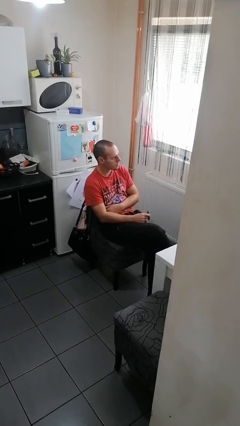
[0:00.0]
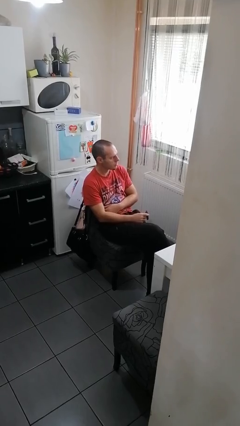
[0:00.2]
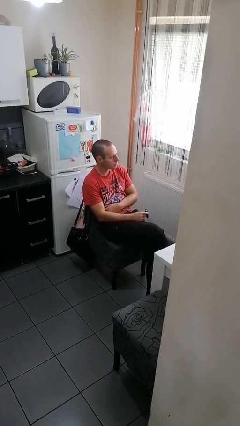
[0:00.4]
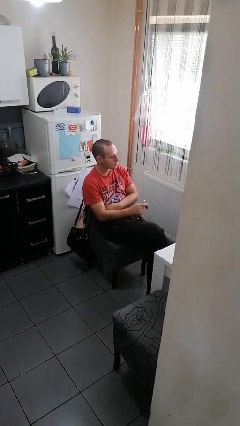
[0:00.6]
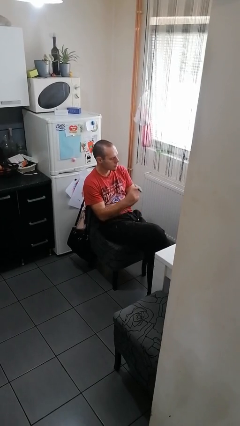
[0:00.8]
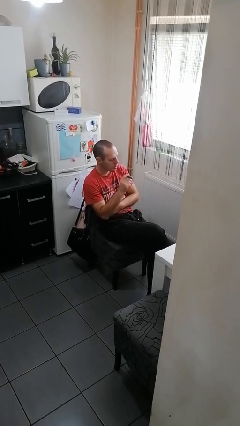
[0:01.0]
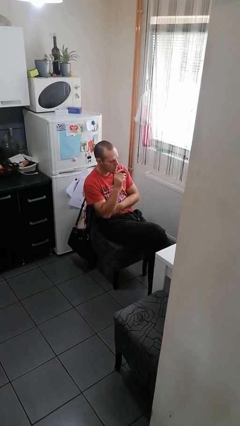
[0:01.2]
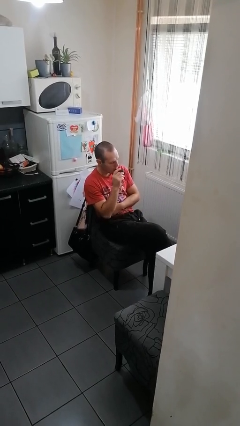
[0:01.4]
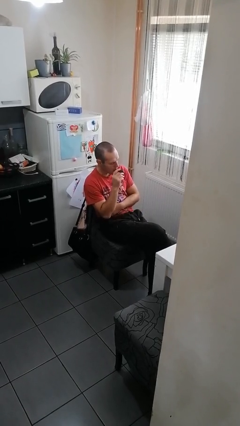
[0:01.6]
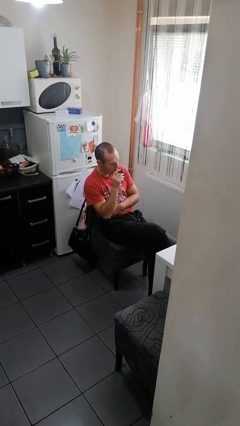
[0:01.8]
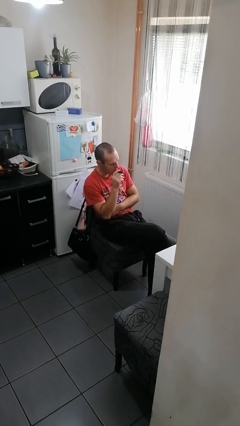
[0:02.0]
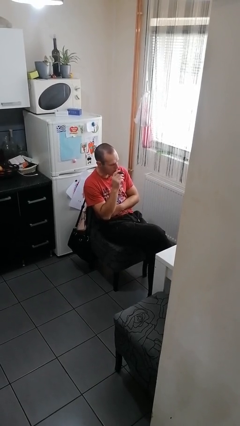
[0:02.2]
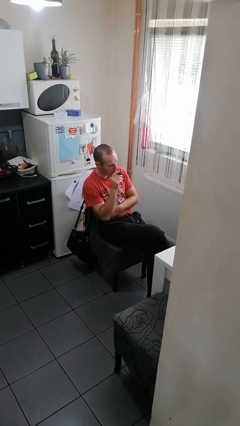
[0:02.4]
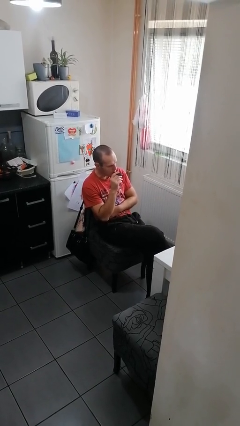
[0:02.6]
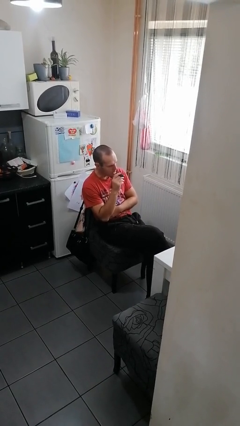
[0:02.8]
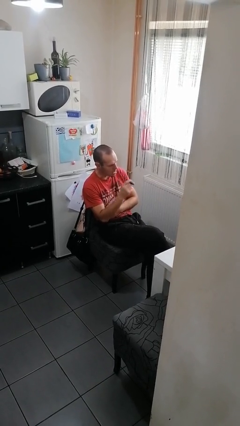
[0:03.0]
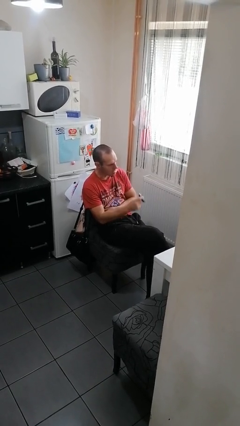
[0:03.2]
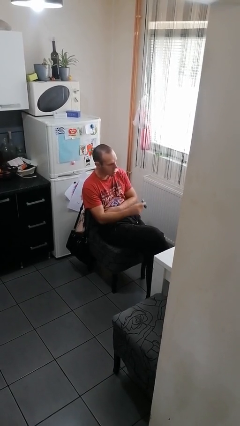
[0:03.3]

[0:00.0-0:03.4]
person vapes

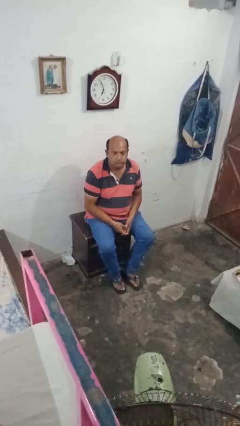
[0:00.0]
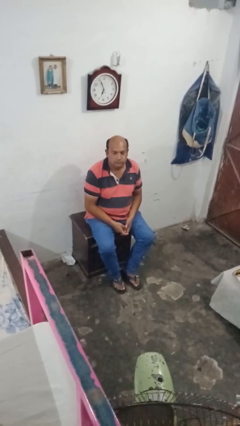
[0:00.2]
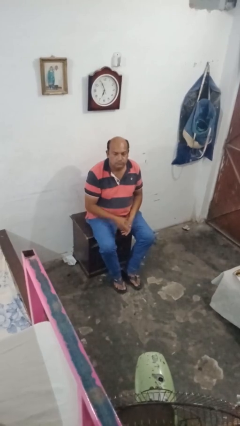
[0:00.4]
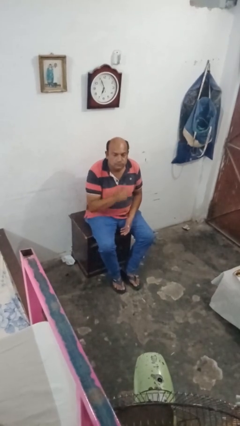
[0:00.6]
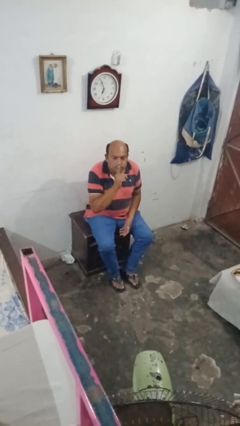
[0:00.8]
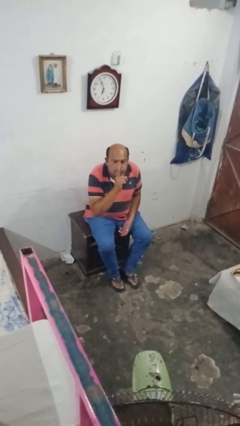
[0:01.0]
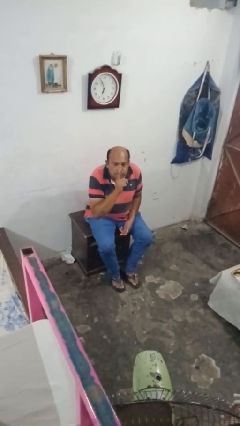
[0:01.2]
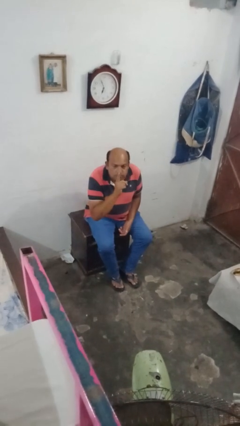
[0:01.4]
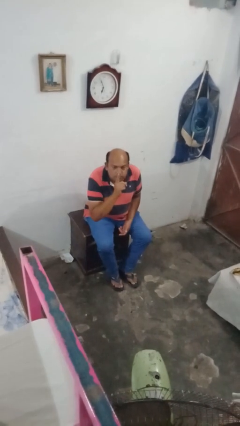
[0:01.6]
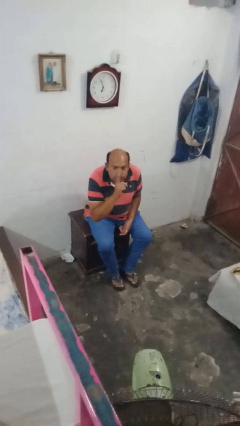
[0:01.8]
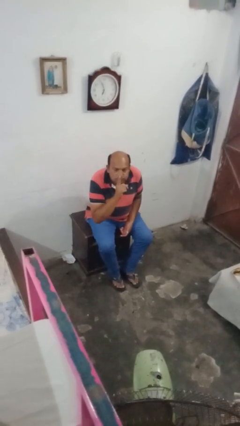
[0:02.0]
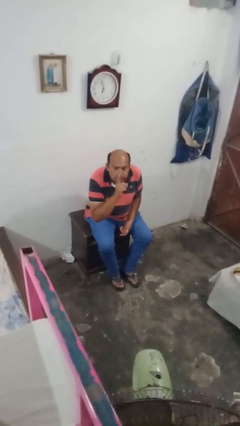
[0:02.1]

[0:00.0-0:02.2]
person gestures blow kiss

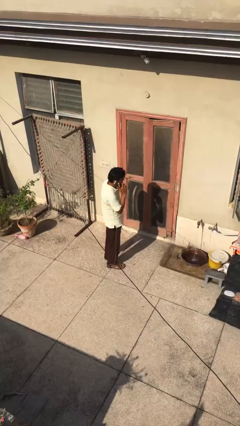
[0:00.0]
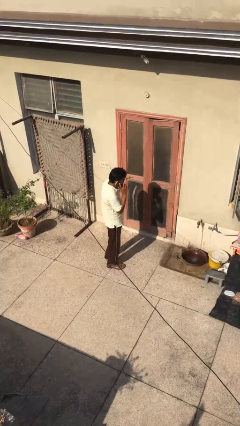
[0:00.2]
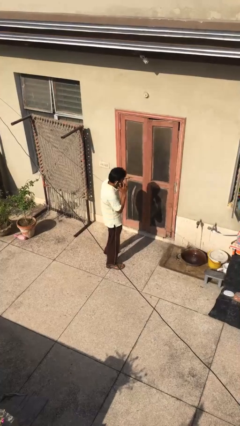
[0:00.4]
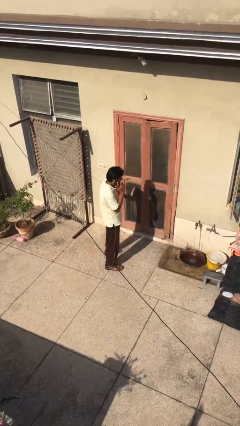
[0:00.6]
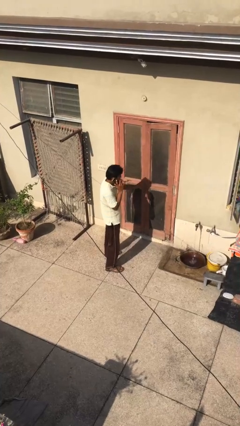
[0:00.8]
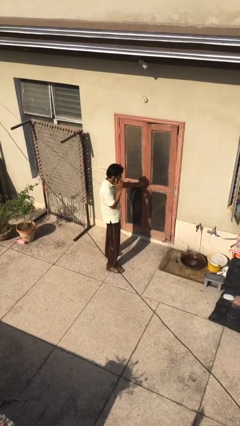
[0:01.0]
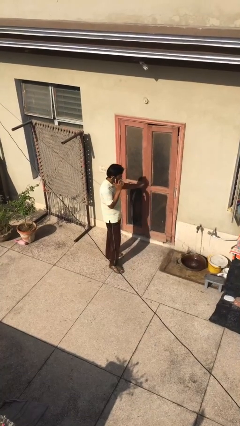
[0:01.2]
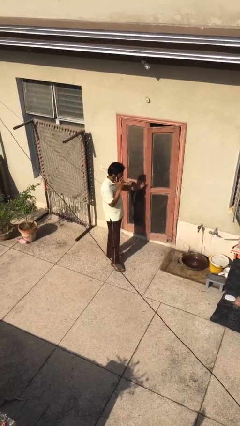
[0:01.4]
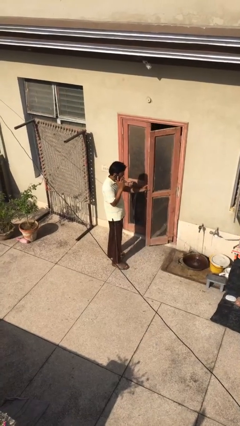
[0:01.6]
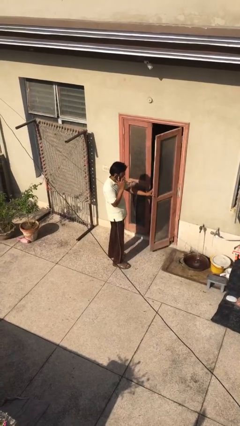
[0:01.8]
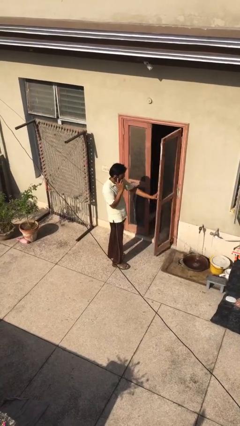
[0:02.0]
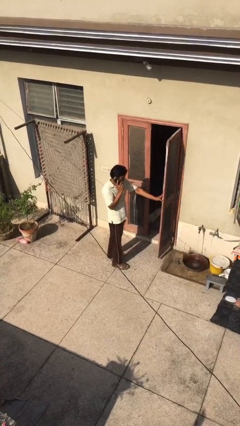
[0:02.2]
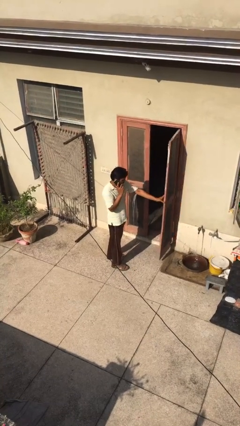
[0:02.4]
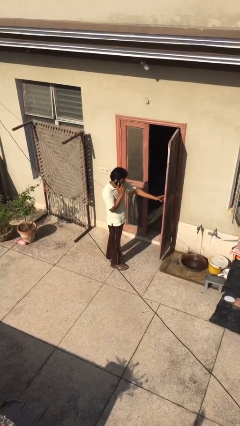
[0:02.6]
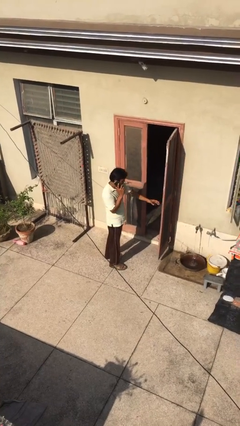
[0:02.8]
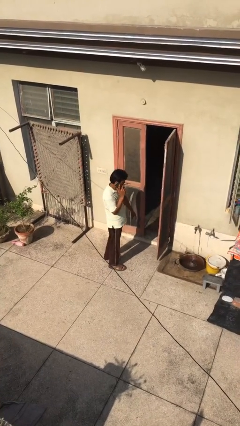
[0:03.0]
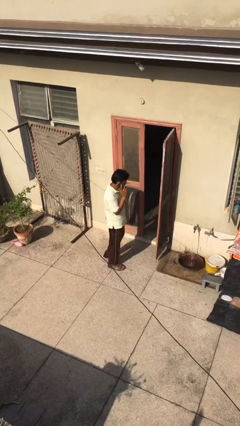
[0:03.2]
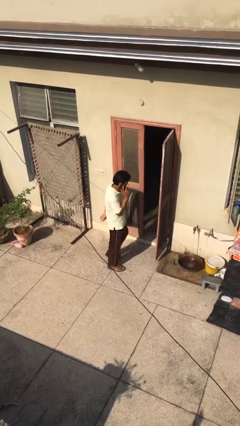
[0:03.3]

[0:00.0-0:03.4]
person opens facility door

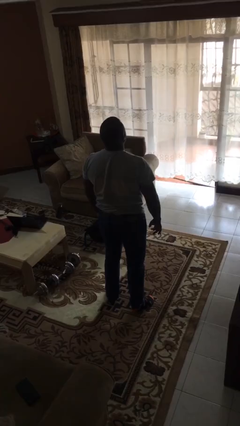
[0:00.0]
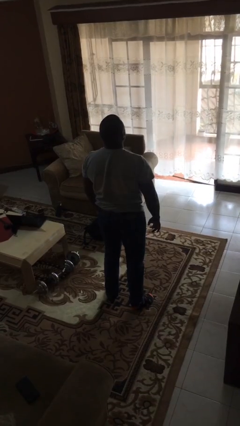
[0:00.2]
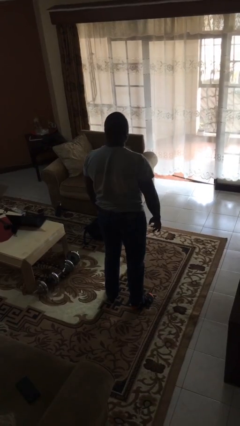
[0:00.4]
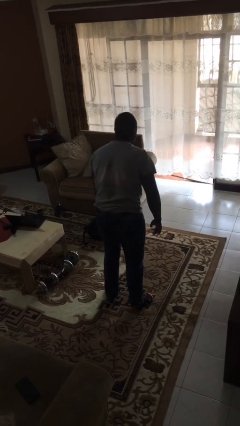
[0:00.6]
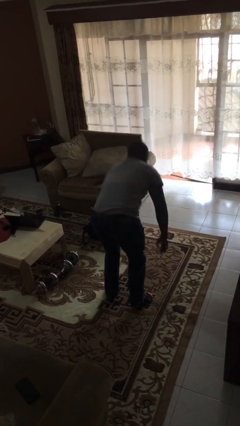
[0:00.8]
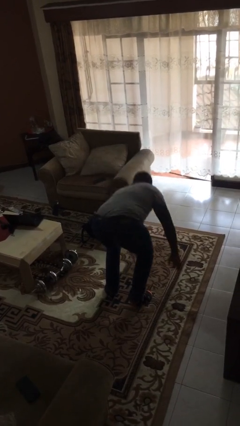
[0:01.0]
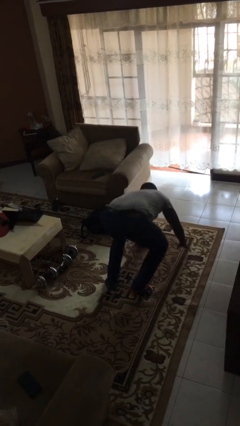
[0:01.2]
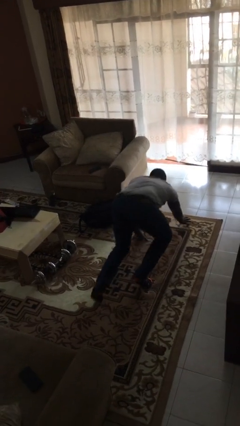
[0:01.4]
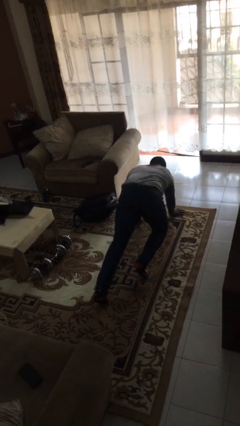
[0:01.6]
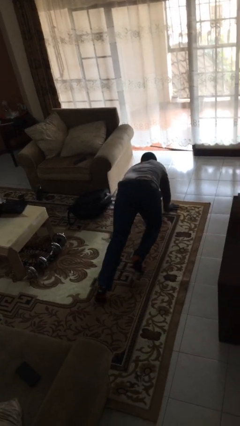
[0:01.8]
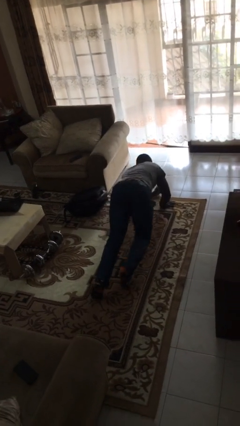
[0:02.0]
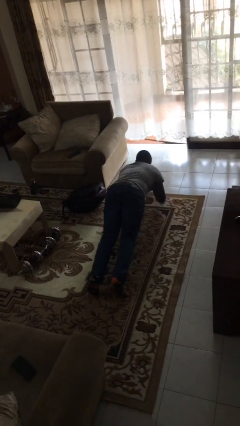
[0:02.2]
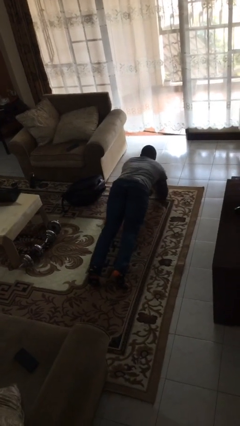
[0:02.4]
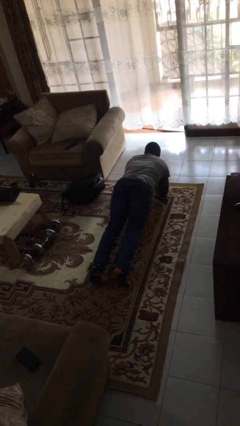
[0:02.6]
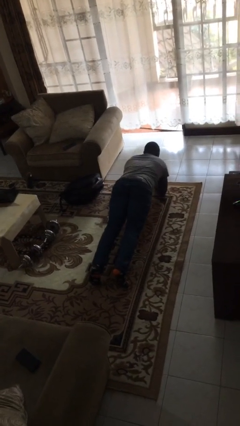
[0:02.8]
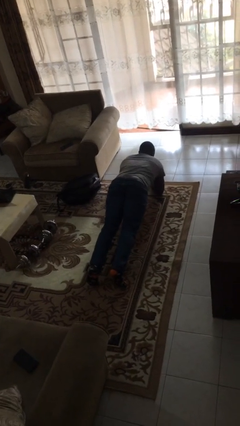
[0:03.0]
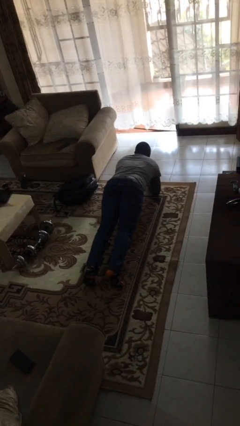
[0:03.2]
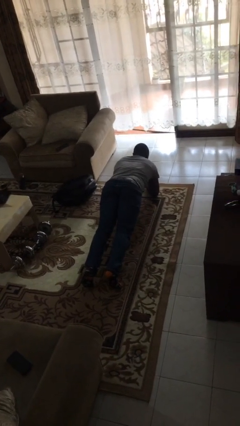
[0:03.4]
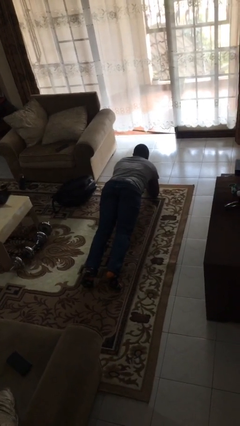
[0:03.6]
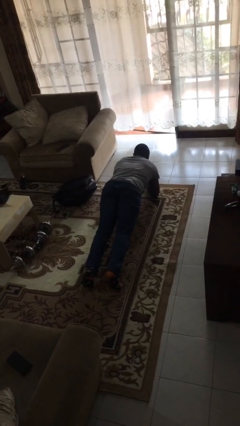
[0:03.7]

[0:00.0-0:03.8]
person exercises with plank

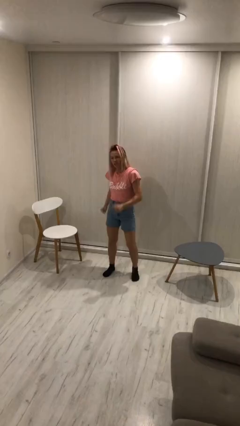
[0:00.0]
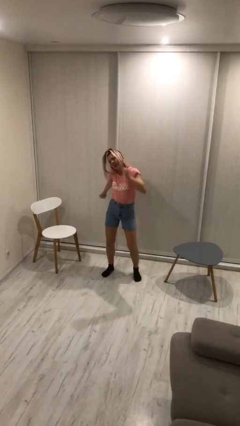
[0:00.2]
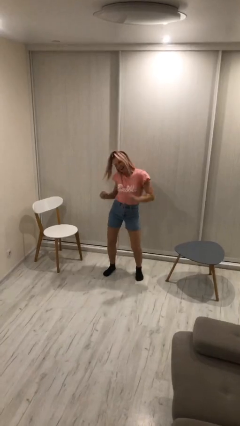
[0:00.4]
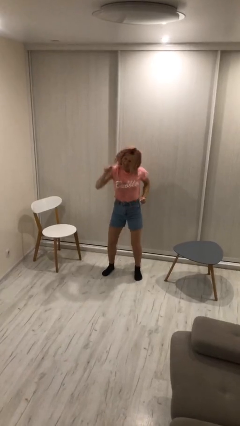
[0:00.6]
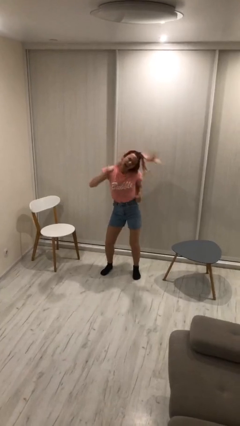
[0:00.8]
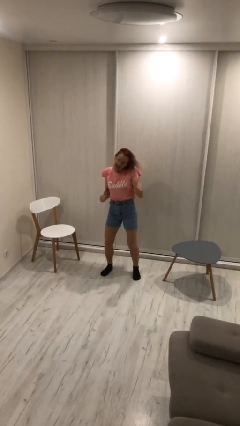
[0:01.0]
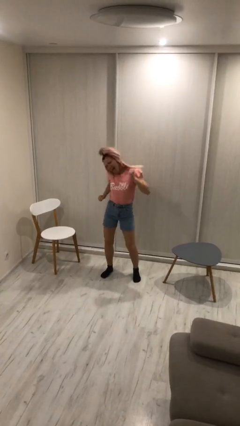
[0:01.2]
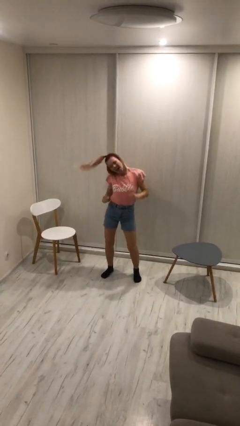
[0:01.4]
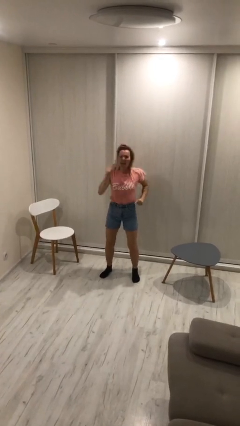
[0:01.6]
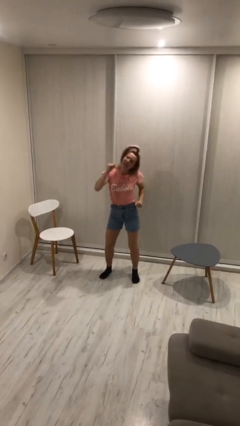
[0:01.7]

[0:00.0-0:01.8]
person dances in place

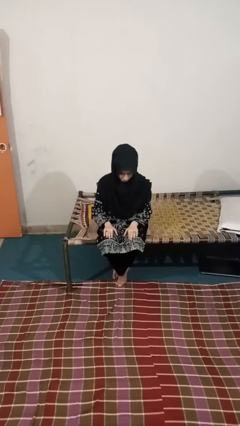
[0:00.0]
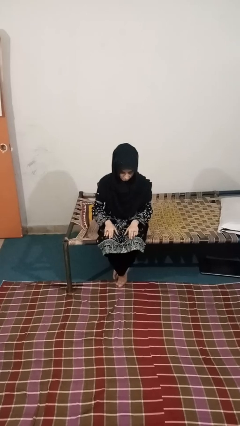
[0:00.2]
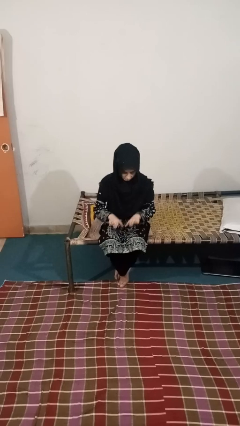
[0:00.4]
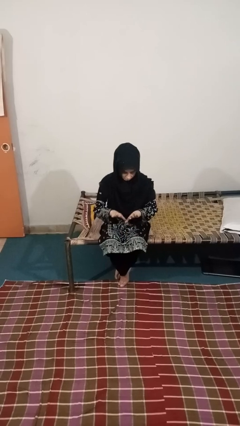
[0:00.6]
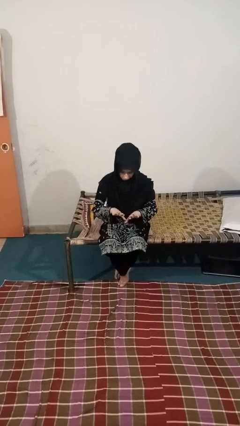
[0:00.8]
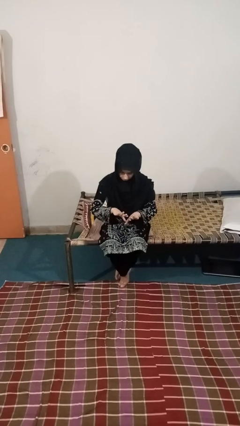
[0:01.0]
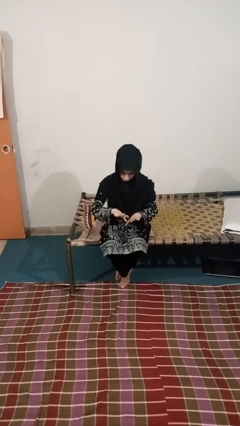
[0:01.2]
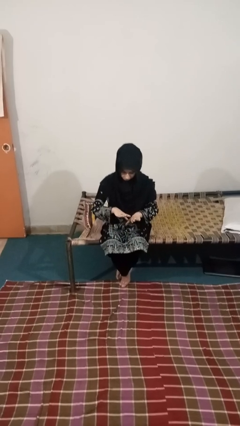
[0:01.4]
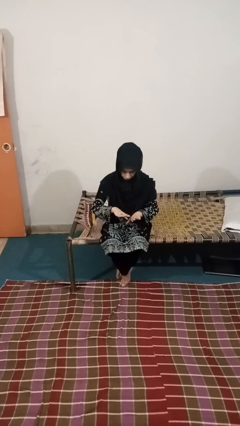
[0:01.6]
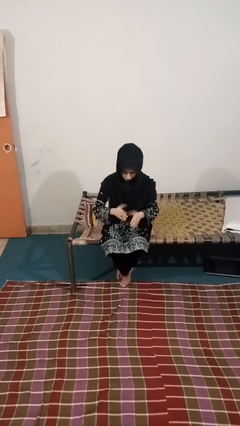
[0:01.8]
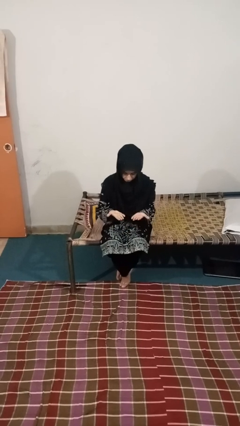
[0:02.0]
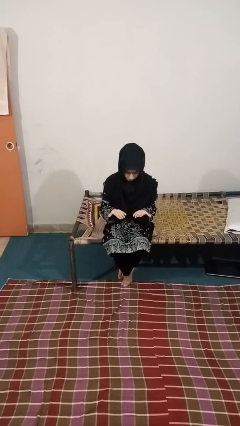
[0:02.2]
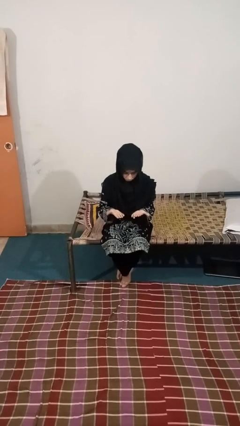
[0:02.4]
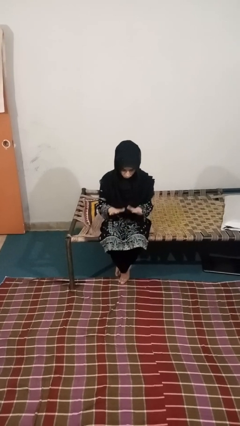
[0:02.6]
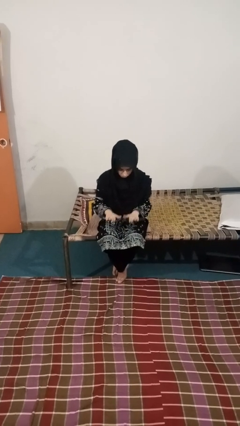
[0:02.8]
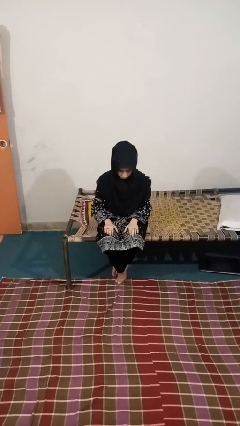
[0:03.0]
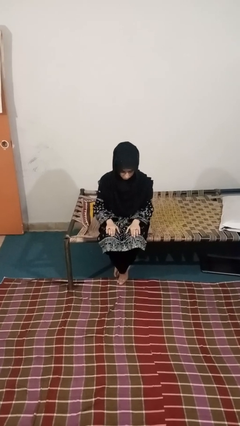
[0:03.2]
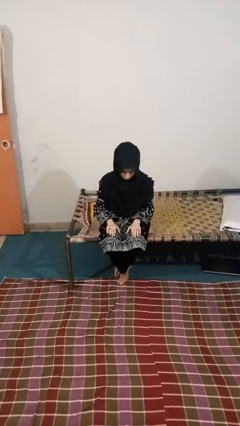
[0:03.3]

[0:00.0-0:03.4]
person looks at hands in lap
